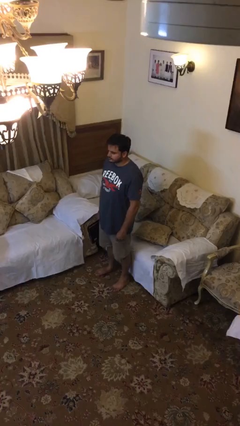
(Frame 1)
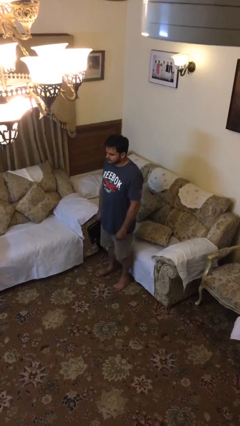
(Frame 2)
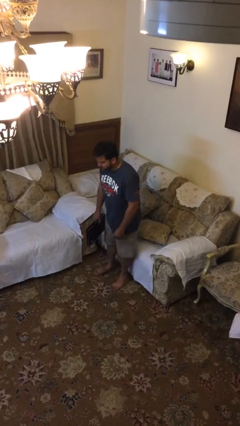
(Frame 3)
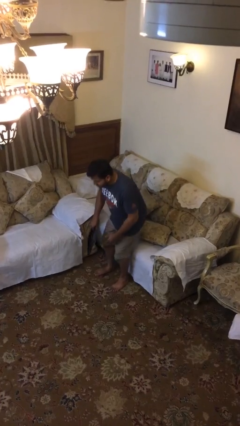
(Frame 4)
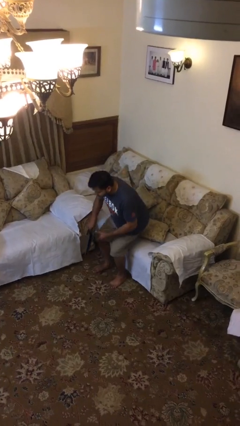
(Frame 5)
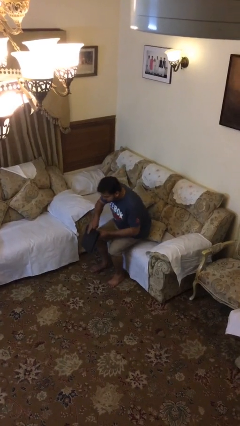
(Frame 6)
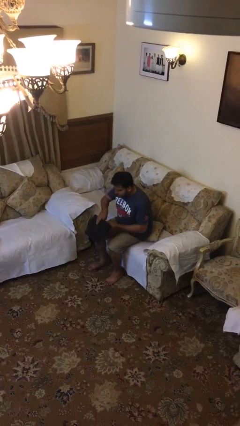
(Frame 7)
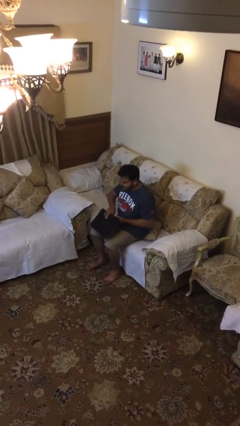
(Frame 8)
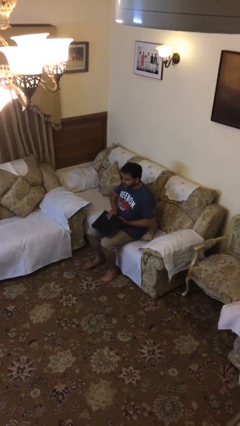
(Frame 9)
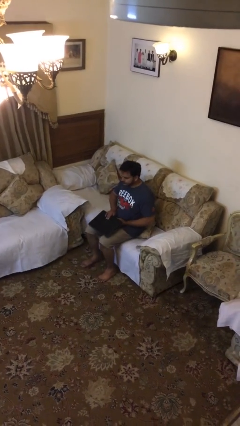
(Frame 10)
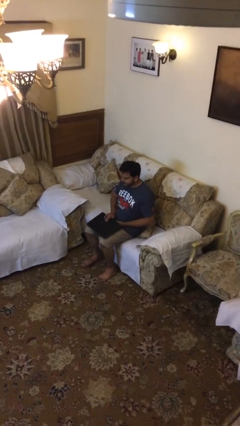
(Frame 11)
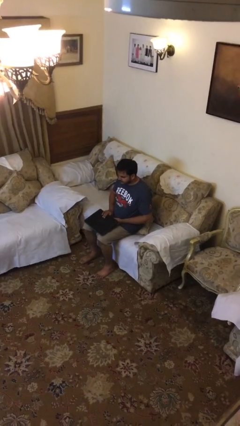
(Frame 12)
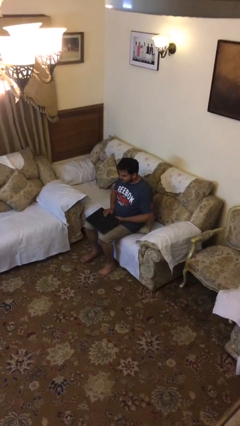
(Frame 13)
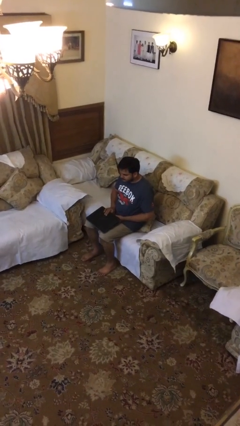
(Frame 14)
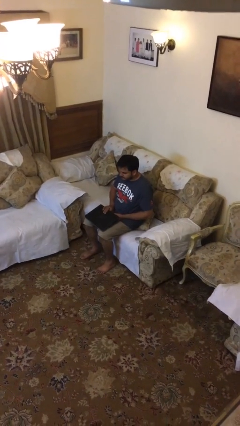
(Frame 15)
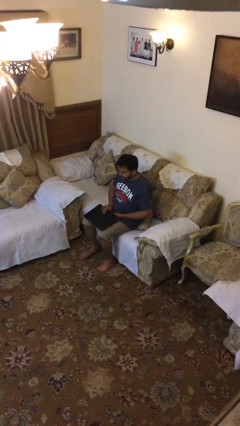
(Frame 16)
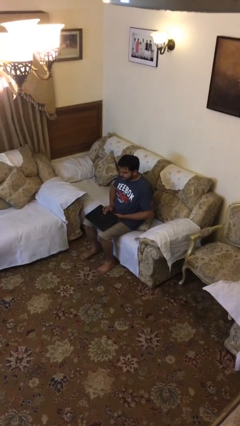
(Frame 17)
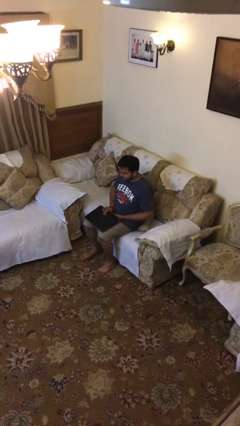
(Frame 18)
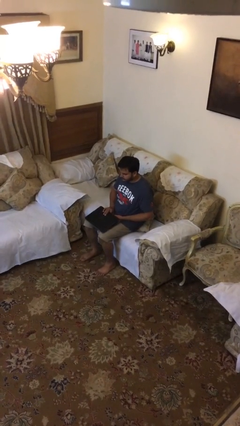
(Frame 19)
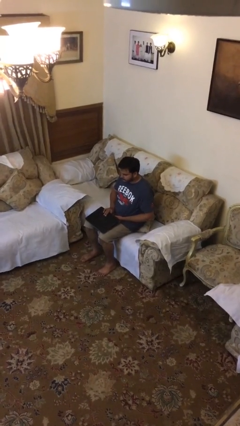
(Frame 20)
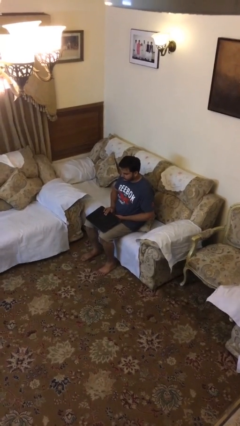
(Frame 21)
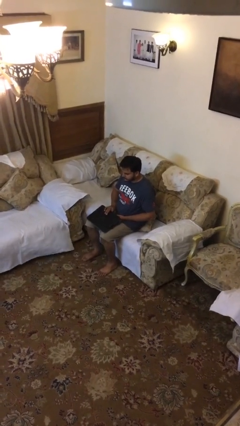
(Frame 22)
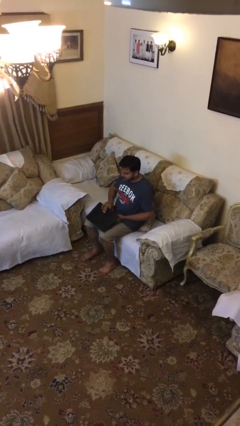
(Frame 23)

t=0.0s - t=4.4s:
person sits down

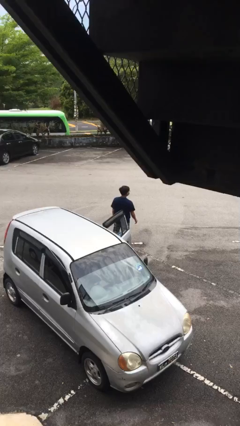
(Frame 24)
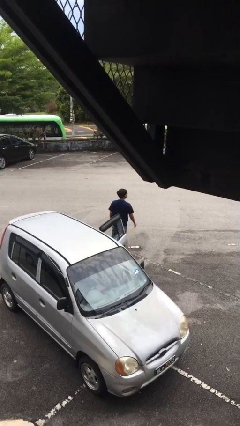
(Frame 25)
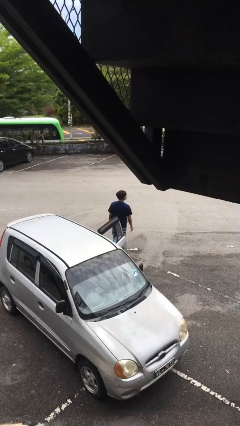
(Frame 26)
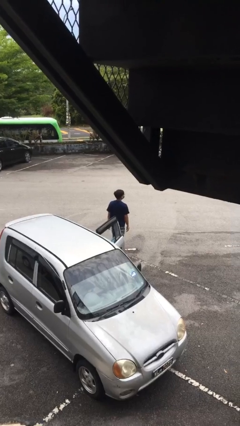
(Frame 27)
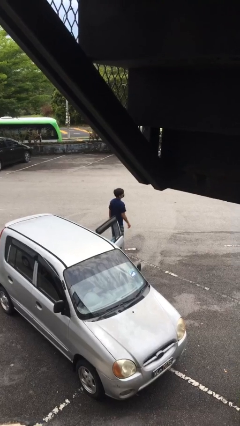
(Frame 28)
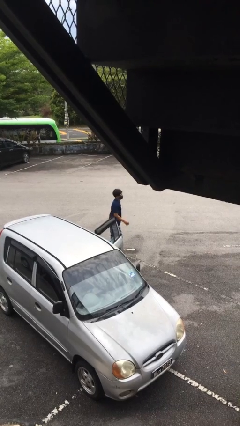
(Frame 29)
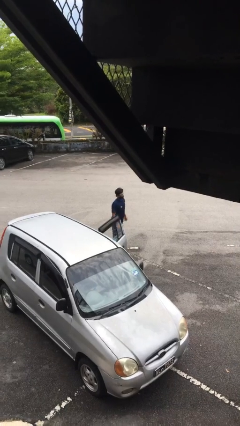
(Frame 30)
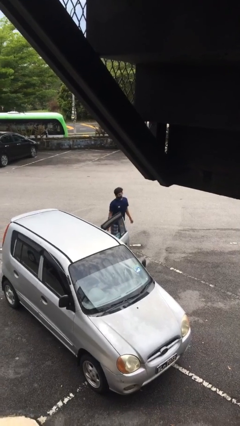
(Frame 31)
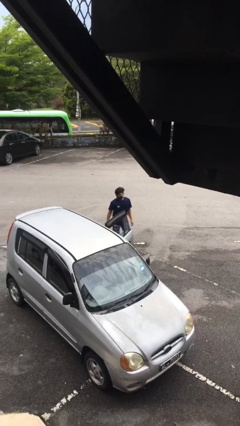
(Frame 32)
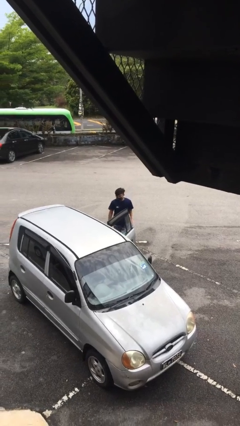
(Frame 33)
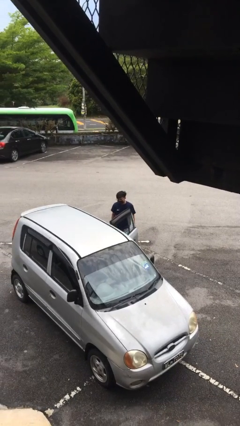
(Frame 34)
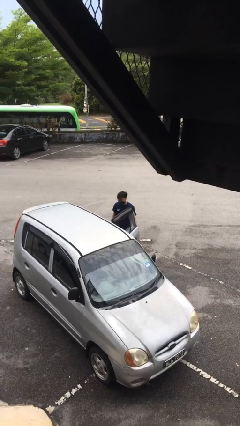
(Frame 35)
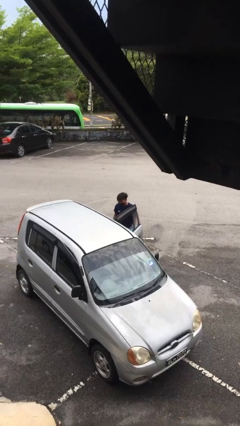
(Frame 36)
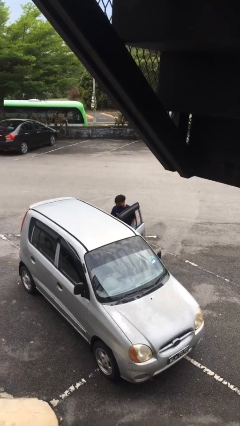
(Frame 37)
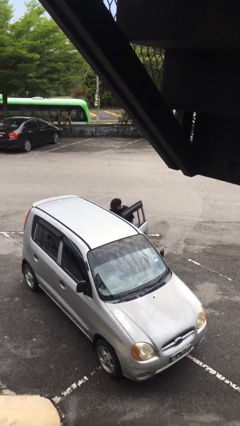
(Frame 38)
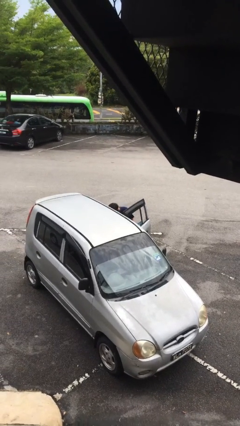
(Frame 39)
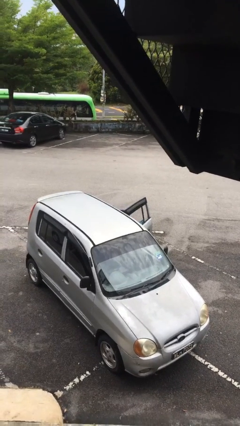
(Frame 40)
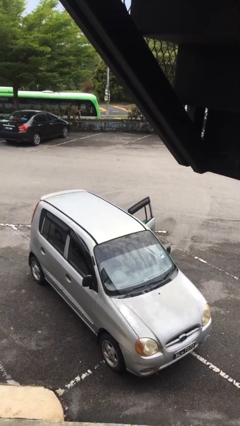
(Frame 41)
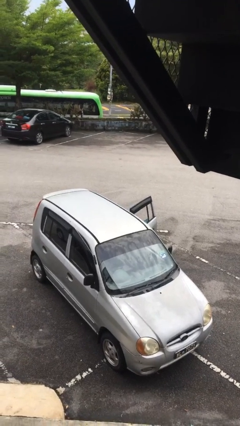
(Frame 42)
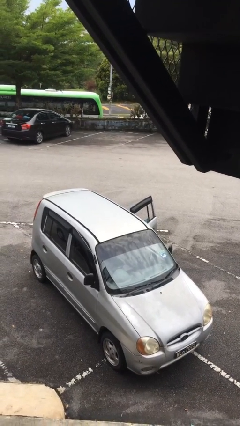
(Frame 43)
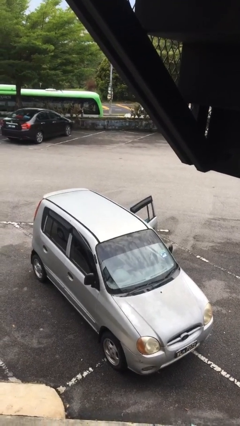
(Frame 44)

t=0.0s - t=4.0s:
person enters car

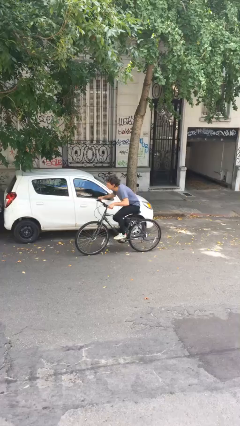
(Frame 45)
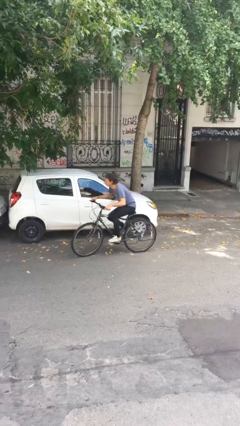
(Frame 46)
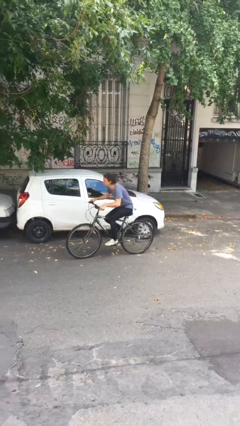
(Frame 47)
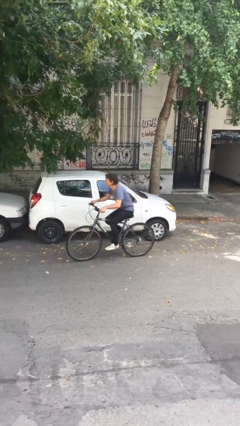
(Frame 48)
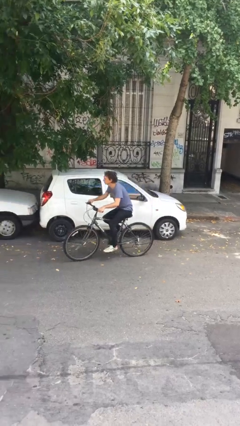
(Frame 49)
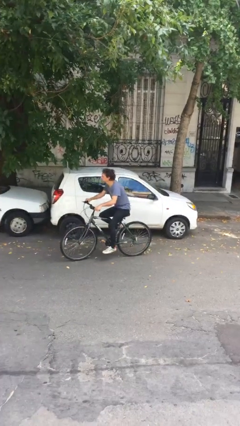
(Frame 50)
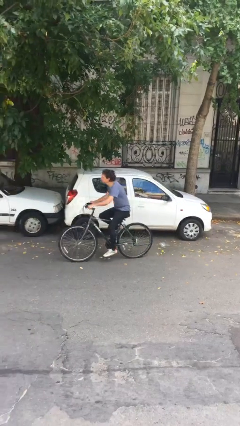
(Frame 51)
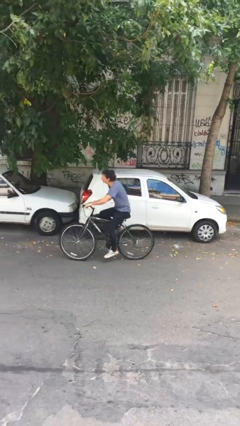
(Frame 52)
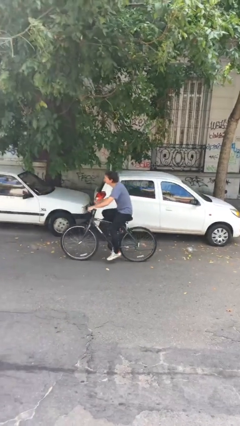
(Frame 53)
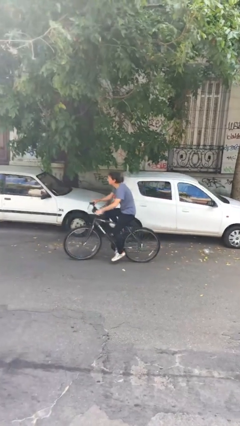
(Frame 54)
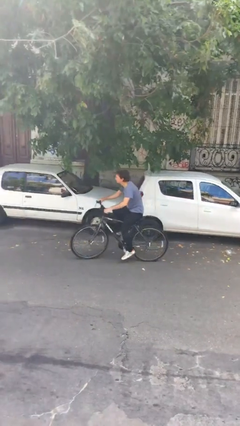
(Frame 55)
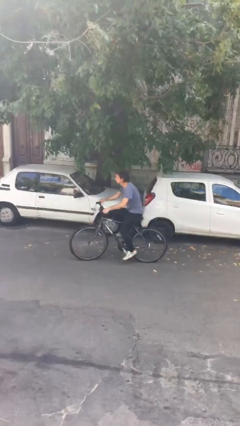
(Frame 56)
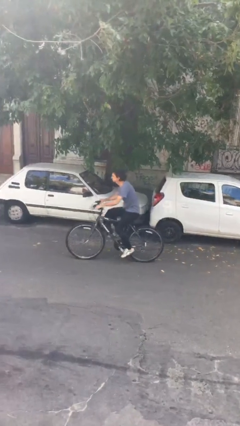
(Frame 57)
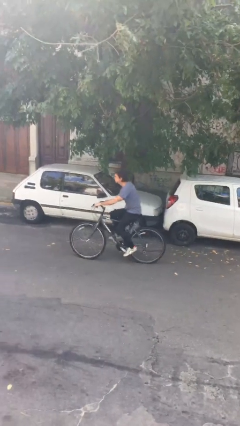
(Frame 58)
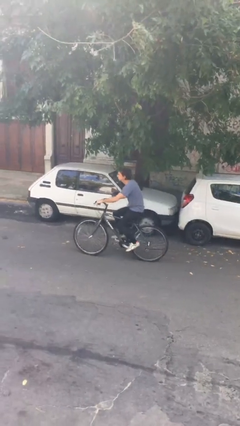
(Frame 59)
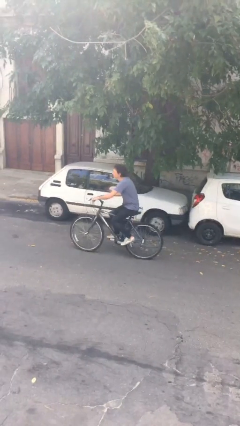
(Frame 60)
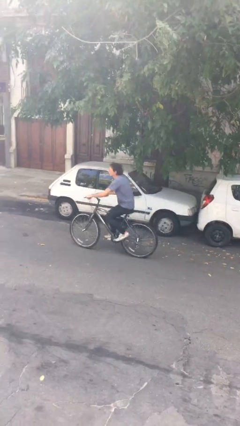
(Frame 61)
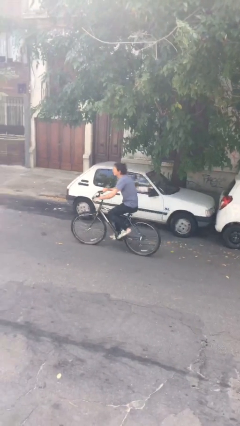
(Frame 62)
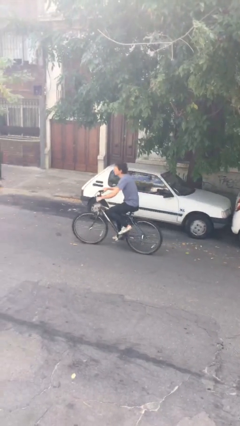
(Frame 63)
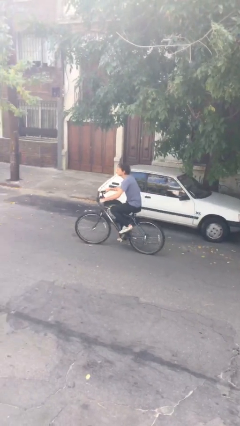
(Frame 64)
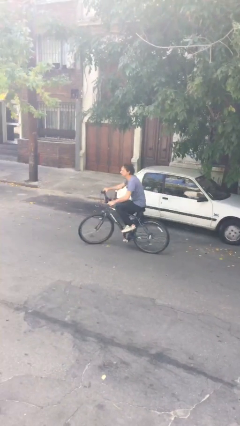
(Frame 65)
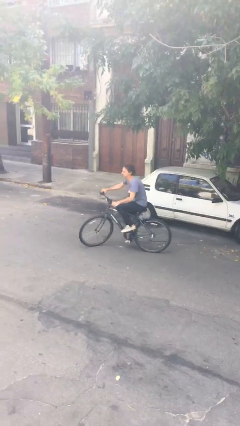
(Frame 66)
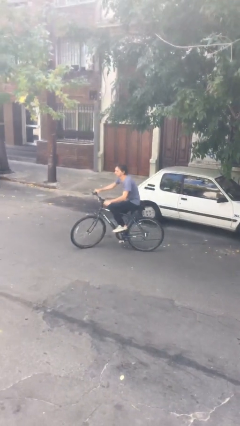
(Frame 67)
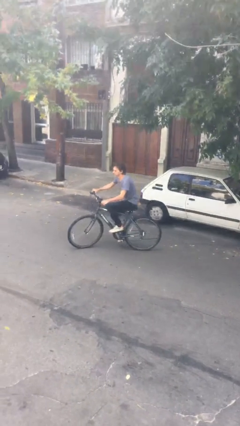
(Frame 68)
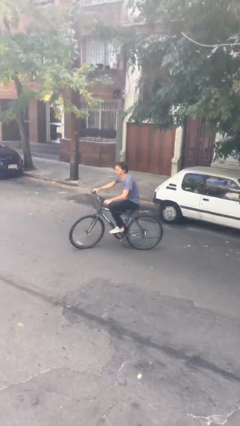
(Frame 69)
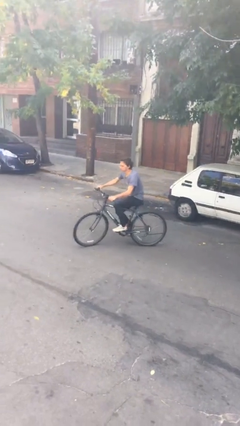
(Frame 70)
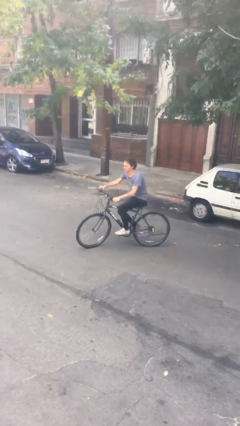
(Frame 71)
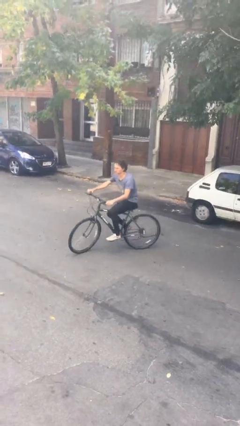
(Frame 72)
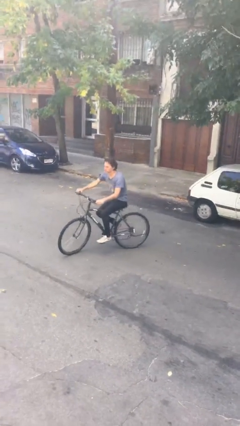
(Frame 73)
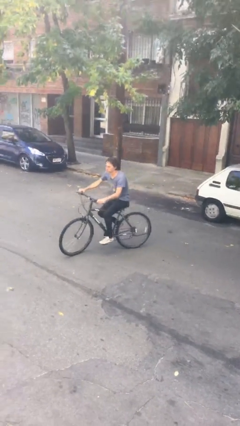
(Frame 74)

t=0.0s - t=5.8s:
person rides bicycle

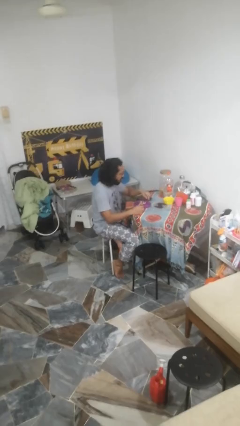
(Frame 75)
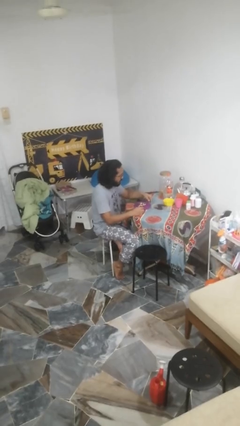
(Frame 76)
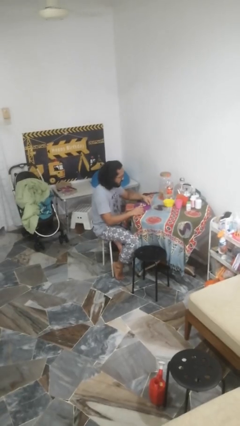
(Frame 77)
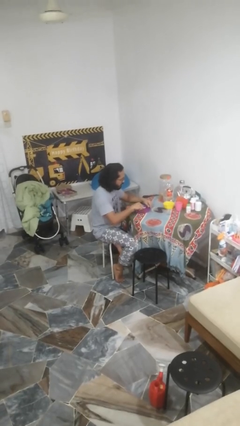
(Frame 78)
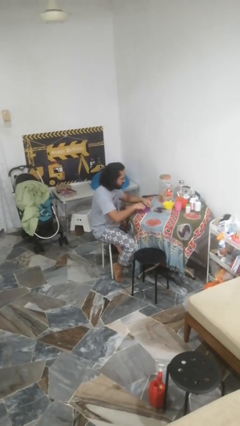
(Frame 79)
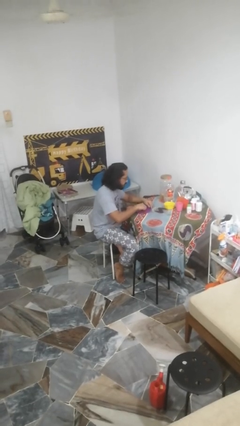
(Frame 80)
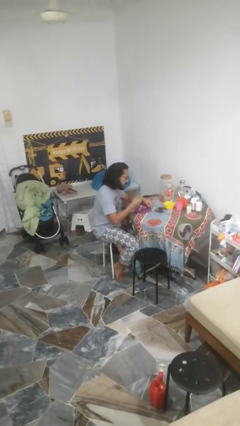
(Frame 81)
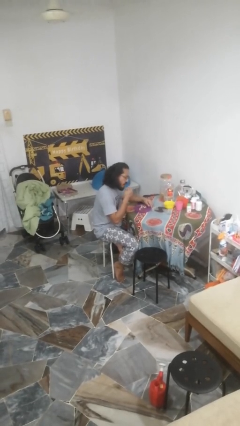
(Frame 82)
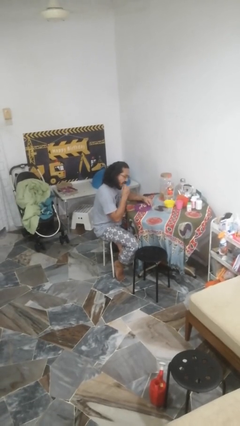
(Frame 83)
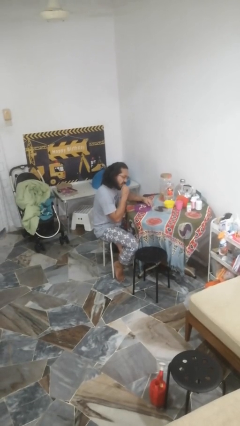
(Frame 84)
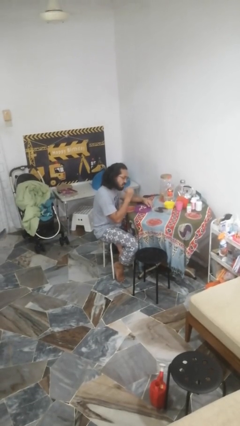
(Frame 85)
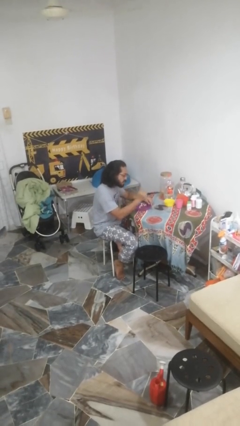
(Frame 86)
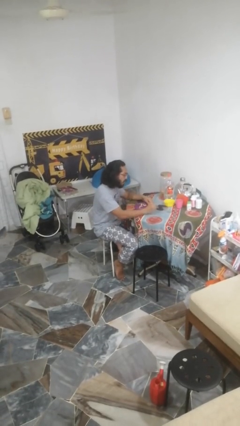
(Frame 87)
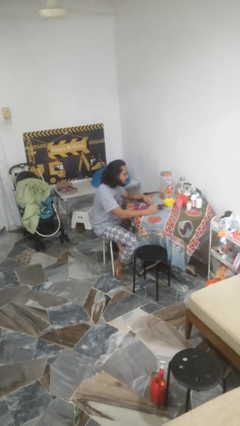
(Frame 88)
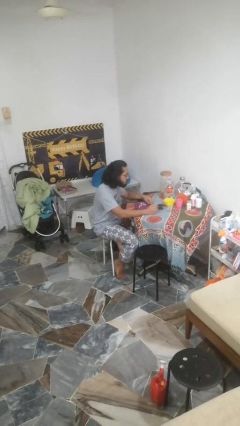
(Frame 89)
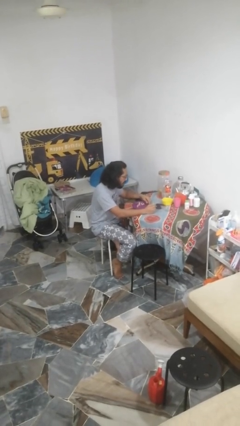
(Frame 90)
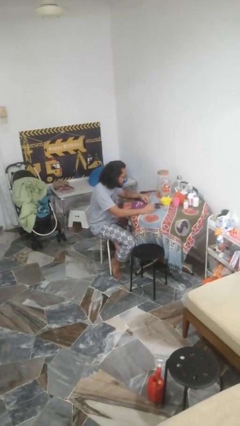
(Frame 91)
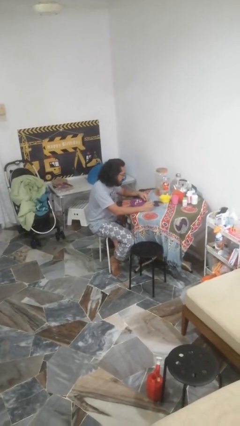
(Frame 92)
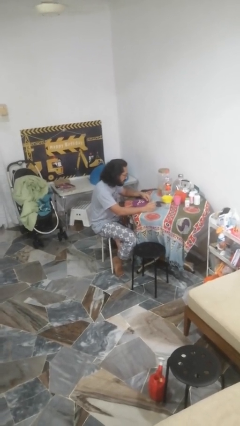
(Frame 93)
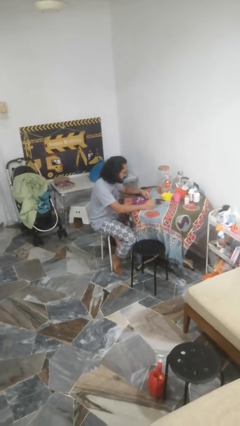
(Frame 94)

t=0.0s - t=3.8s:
person eats with hands
